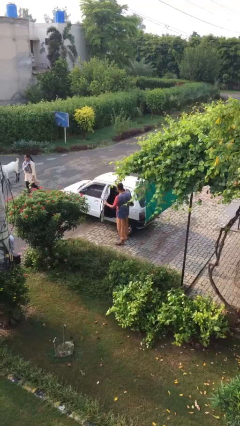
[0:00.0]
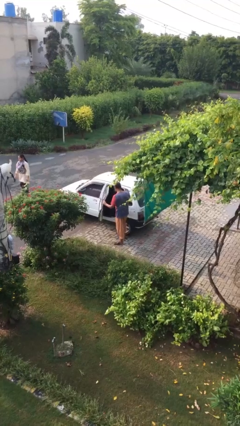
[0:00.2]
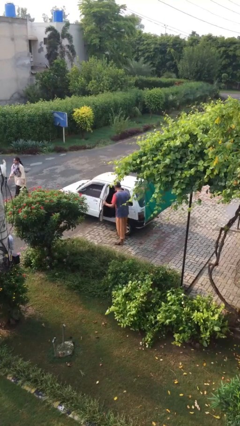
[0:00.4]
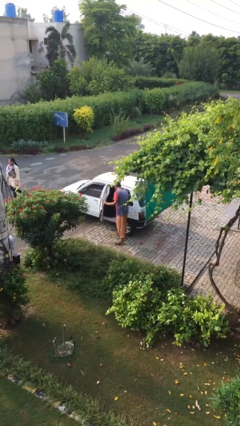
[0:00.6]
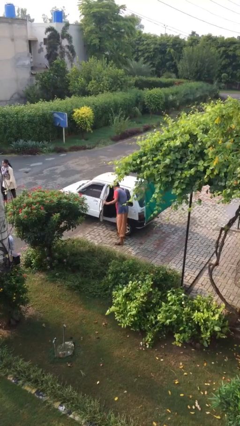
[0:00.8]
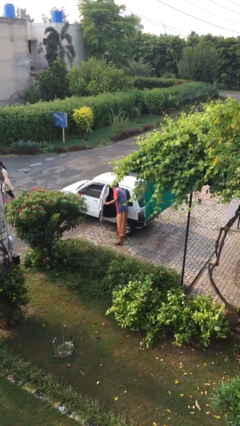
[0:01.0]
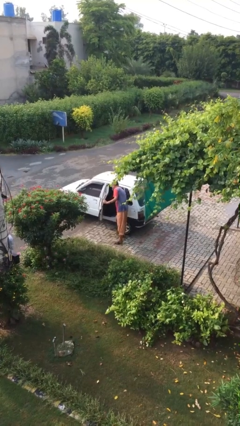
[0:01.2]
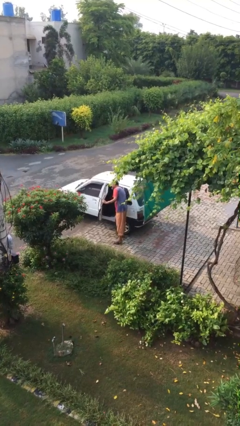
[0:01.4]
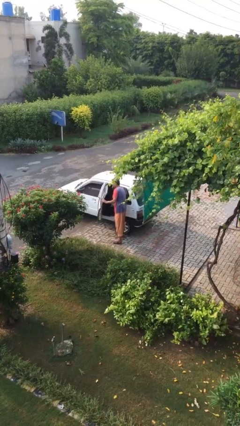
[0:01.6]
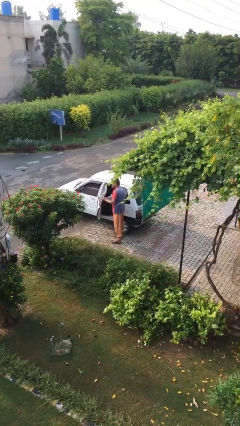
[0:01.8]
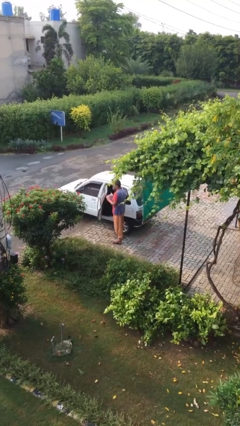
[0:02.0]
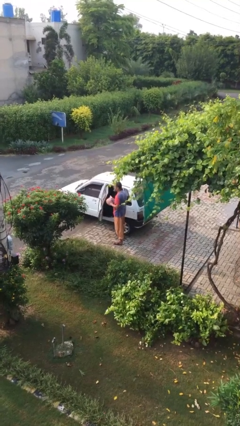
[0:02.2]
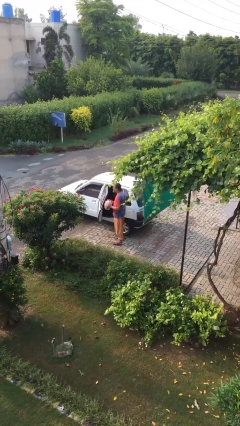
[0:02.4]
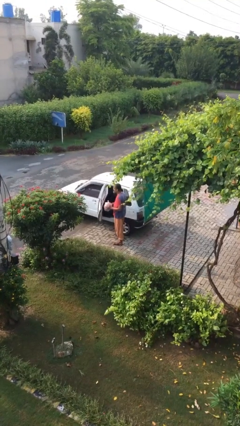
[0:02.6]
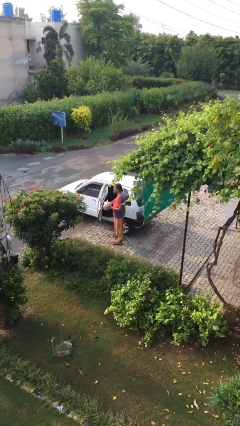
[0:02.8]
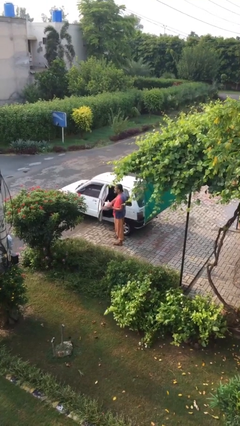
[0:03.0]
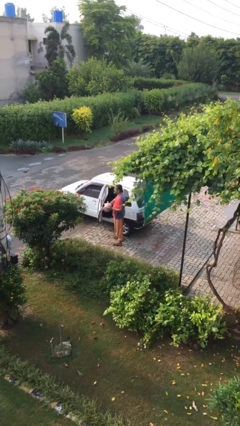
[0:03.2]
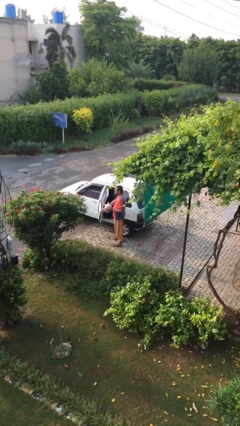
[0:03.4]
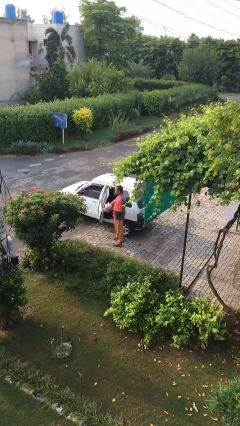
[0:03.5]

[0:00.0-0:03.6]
person unloads car

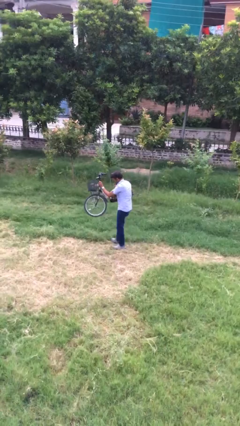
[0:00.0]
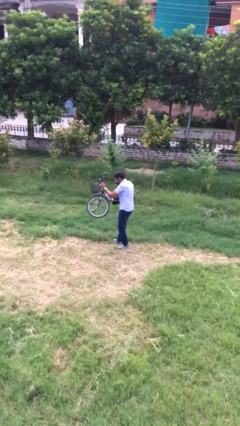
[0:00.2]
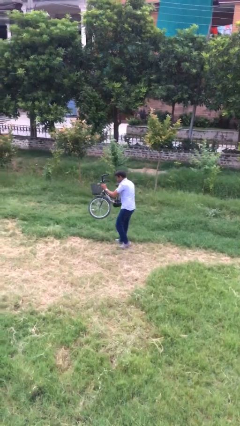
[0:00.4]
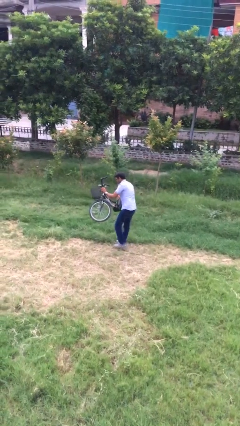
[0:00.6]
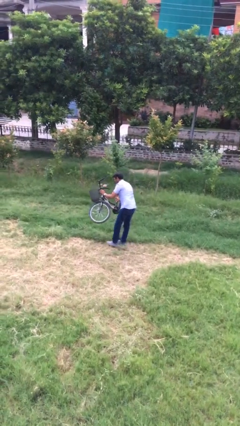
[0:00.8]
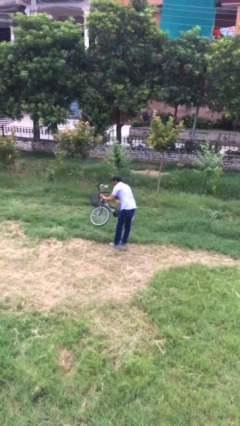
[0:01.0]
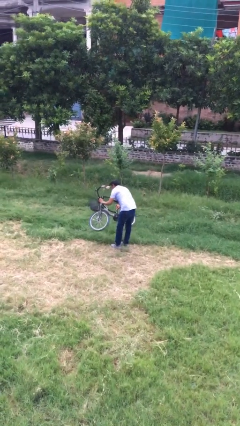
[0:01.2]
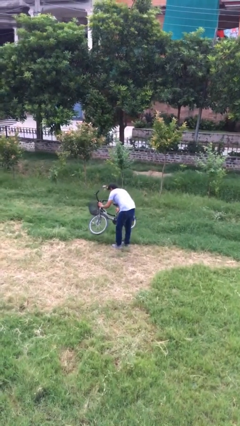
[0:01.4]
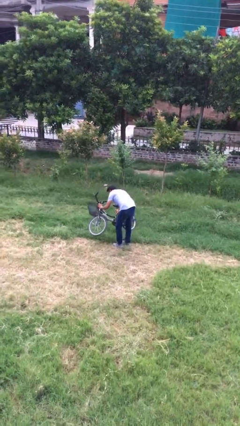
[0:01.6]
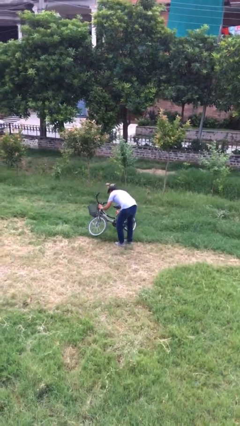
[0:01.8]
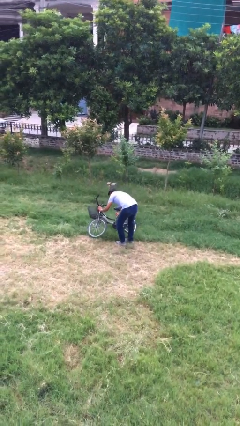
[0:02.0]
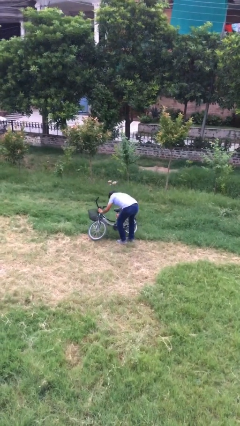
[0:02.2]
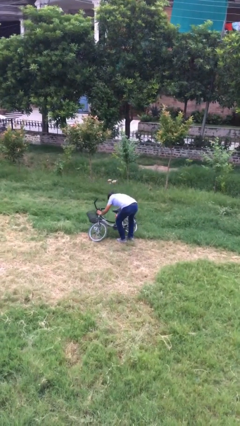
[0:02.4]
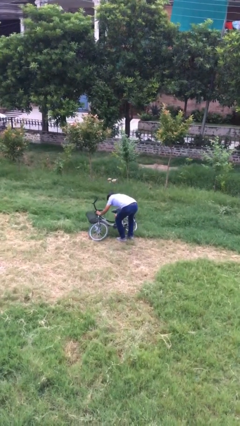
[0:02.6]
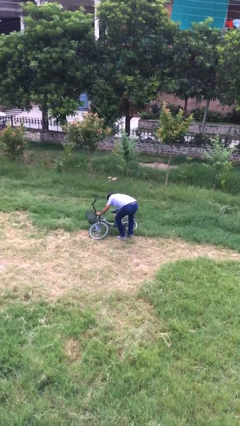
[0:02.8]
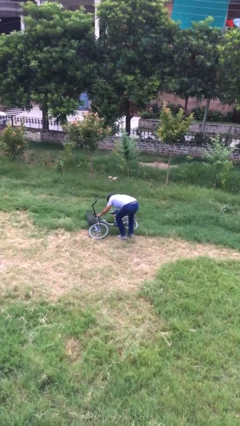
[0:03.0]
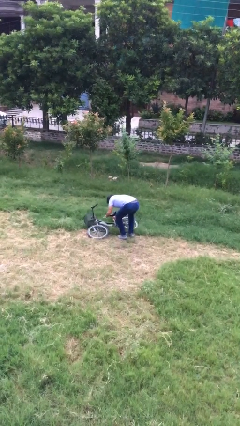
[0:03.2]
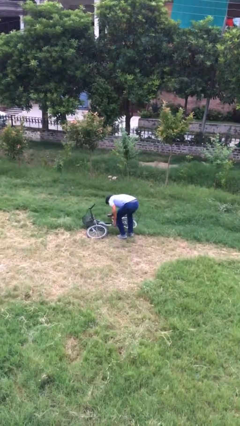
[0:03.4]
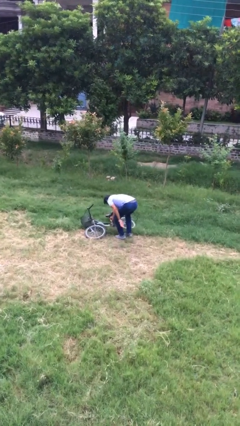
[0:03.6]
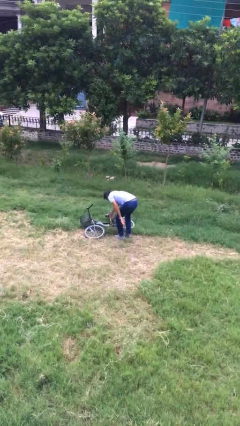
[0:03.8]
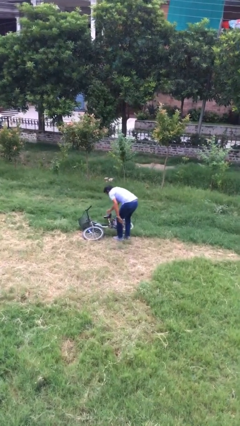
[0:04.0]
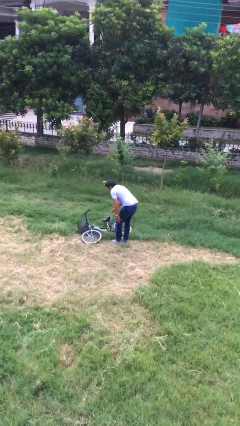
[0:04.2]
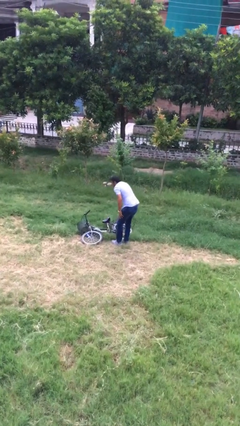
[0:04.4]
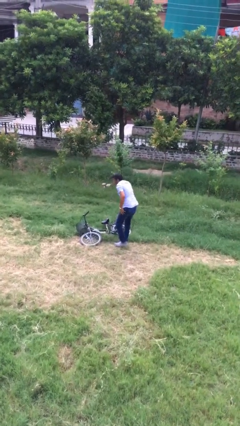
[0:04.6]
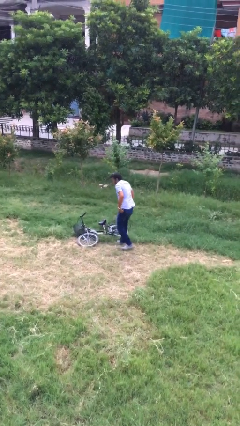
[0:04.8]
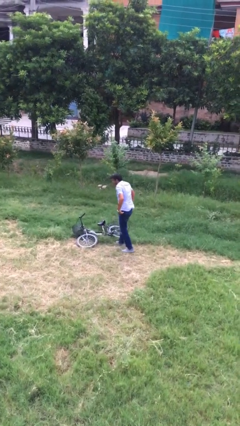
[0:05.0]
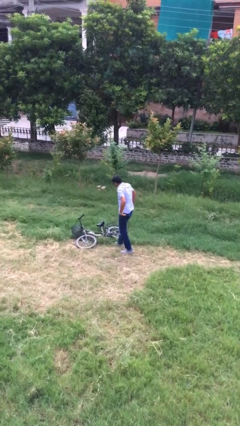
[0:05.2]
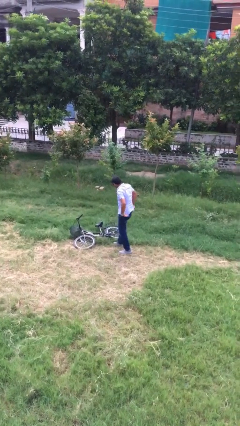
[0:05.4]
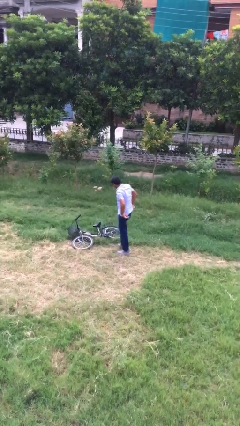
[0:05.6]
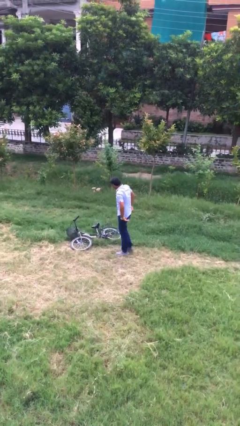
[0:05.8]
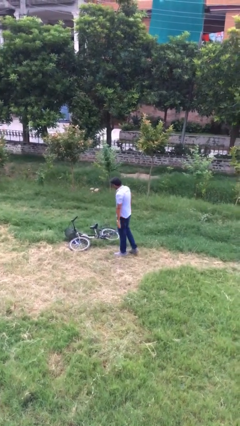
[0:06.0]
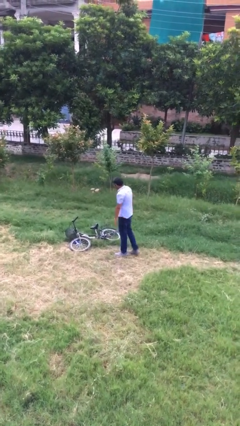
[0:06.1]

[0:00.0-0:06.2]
person puts down object on floor

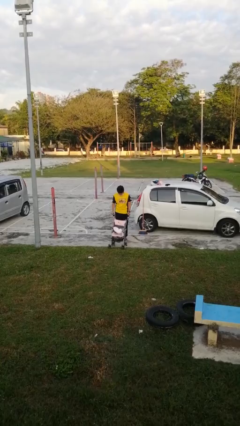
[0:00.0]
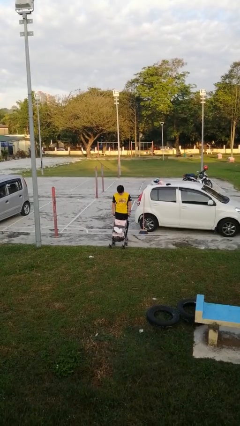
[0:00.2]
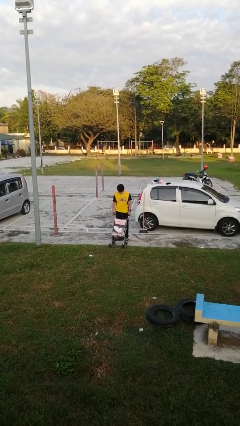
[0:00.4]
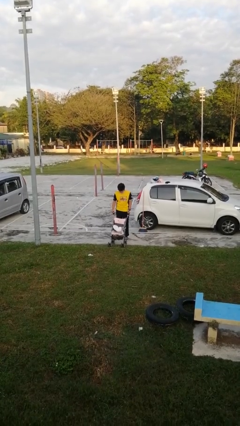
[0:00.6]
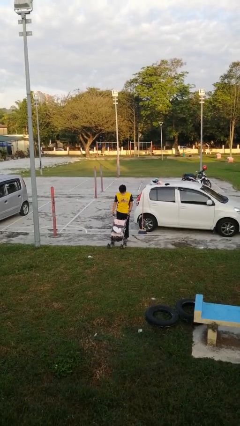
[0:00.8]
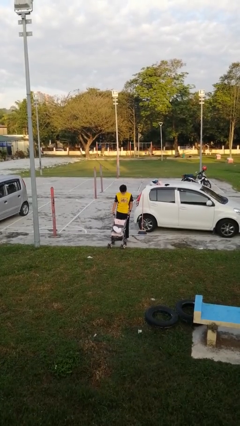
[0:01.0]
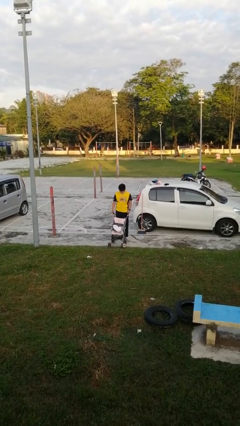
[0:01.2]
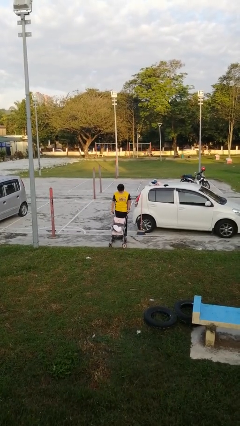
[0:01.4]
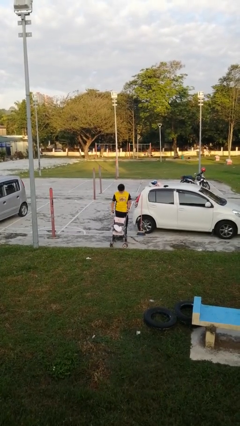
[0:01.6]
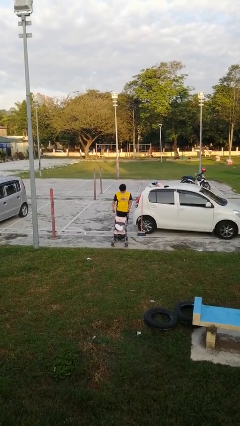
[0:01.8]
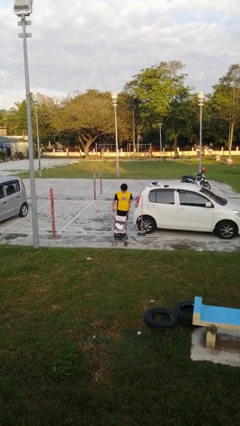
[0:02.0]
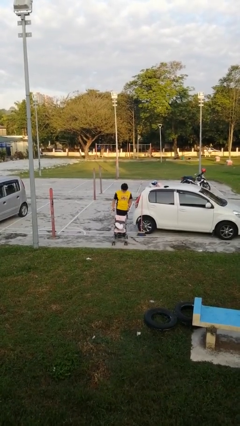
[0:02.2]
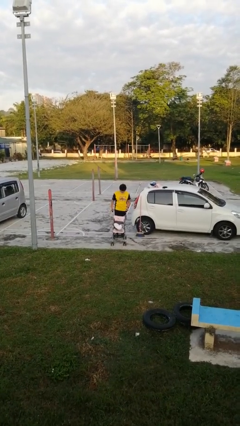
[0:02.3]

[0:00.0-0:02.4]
person pulls wheeled cart

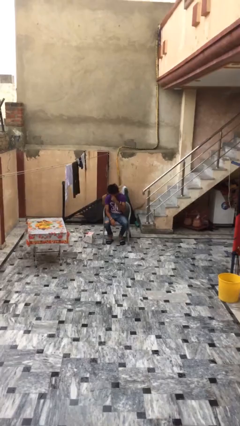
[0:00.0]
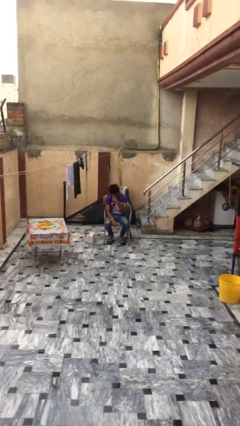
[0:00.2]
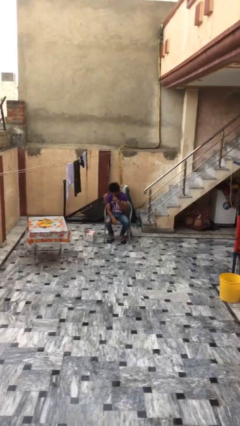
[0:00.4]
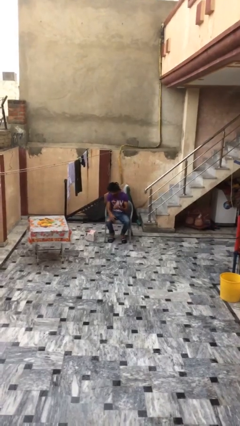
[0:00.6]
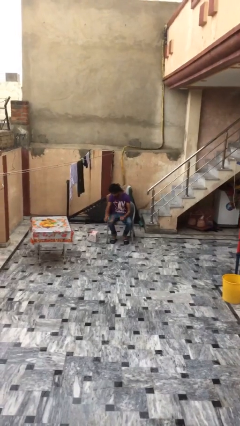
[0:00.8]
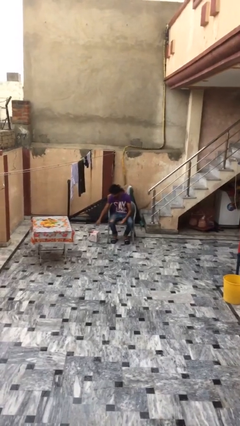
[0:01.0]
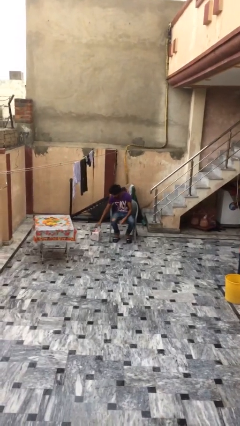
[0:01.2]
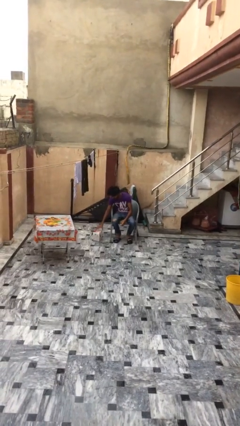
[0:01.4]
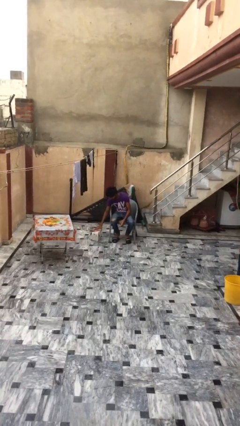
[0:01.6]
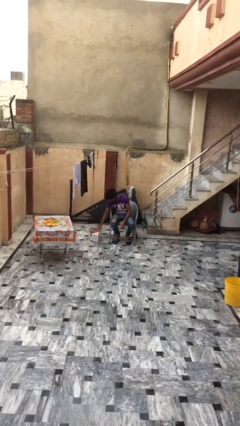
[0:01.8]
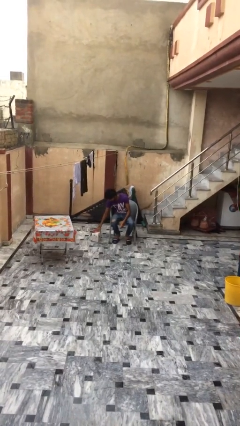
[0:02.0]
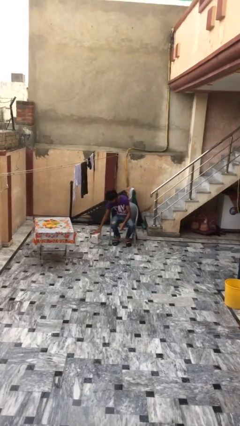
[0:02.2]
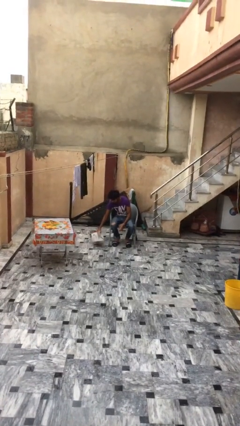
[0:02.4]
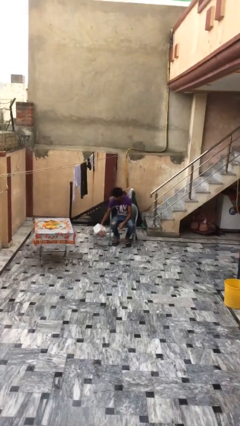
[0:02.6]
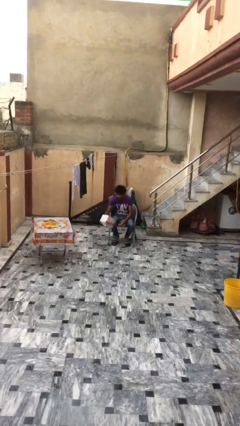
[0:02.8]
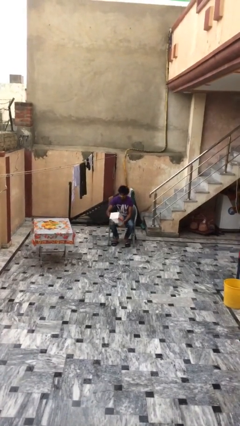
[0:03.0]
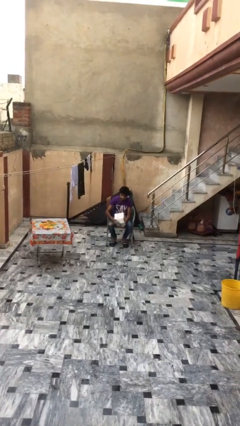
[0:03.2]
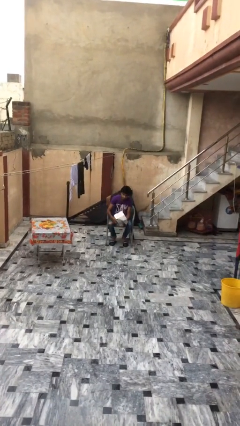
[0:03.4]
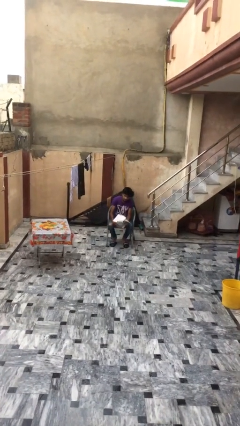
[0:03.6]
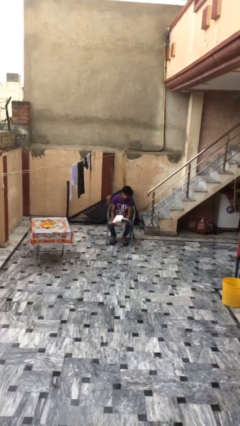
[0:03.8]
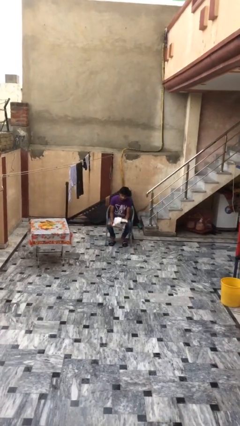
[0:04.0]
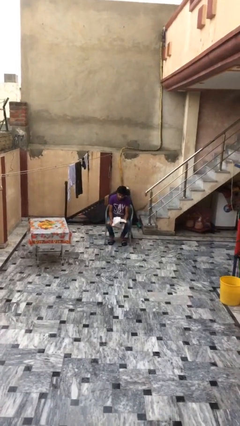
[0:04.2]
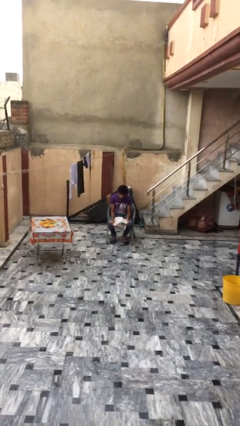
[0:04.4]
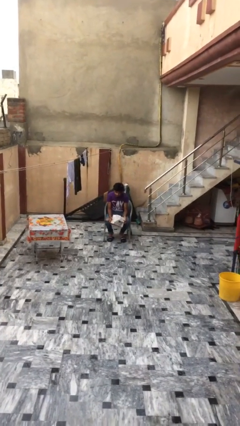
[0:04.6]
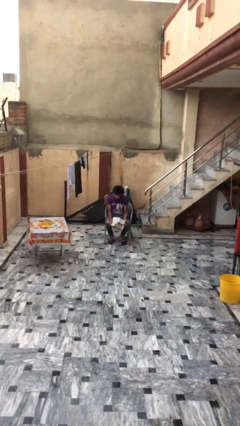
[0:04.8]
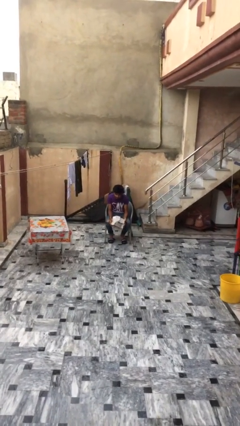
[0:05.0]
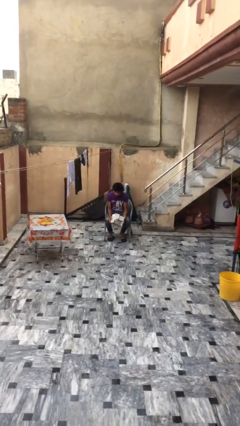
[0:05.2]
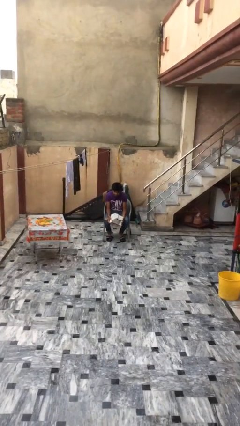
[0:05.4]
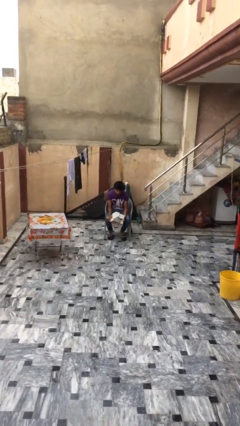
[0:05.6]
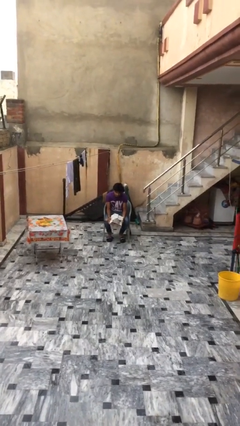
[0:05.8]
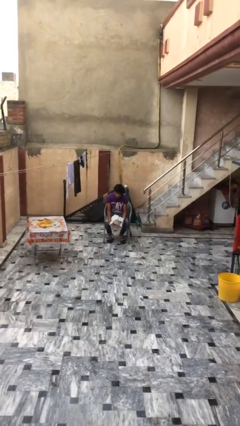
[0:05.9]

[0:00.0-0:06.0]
person picks up object from floor
